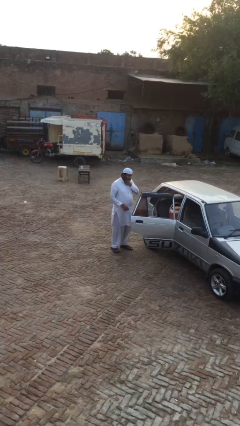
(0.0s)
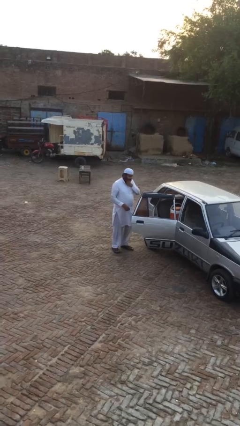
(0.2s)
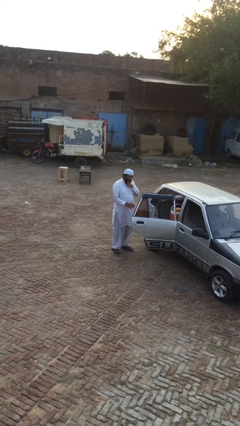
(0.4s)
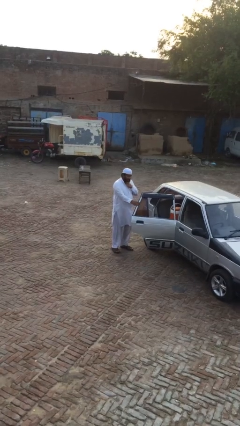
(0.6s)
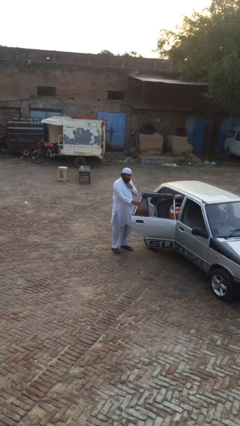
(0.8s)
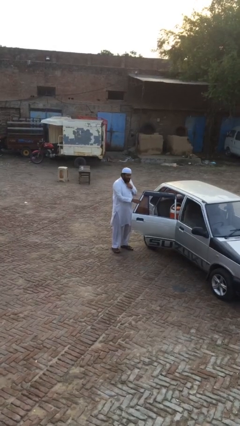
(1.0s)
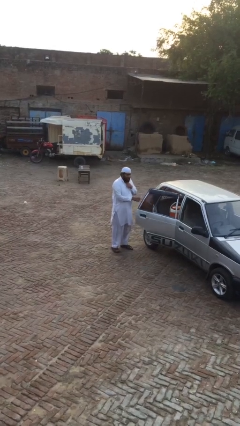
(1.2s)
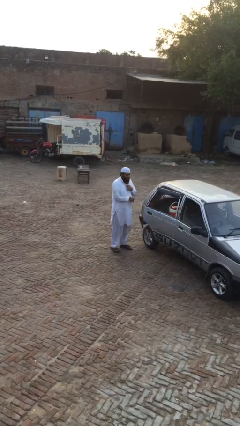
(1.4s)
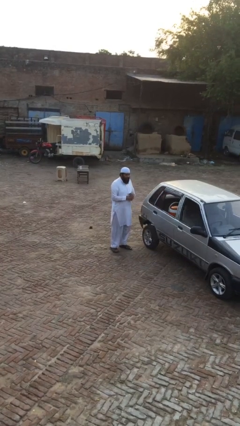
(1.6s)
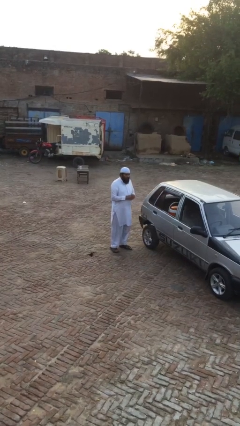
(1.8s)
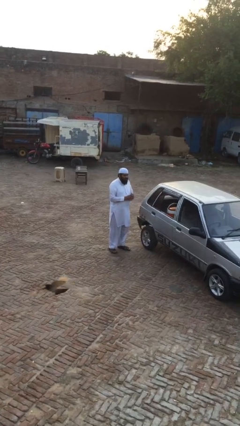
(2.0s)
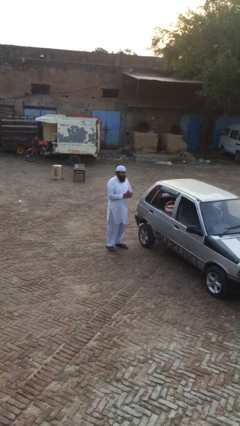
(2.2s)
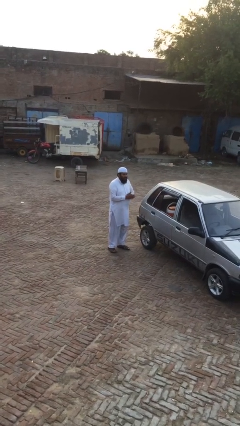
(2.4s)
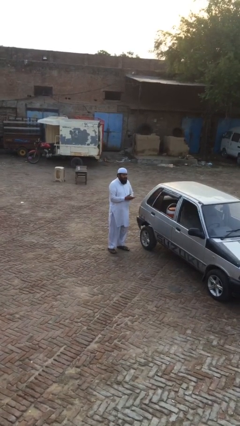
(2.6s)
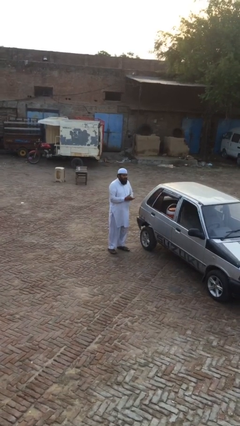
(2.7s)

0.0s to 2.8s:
person closes car door

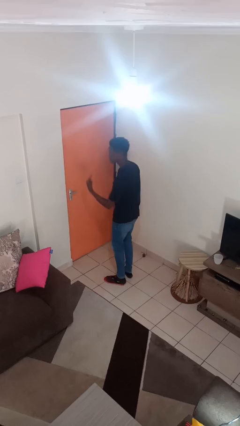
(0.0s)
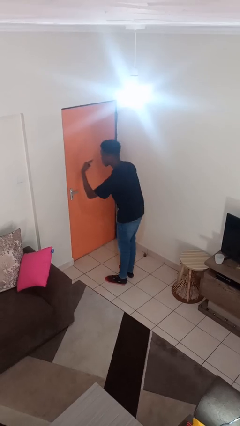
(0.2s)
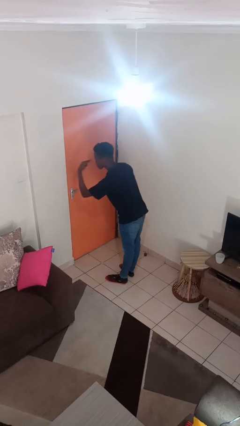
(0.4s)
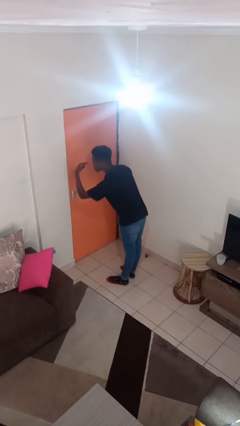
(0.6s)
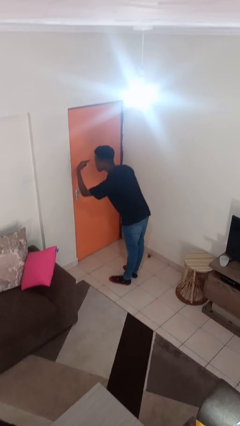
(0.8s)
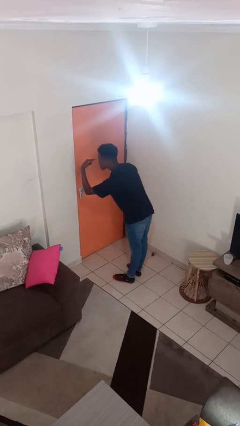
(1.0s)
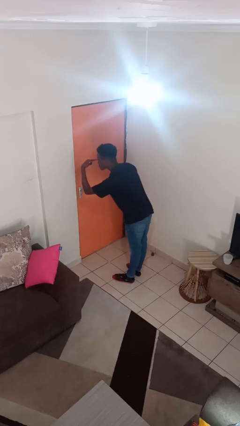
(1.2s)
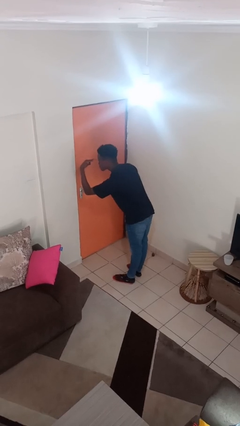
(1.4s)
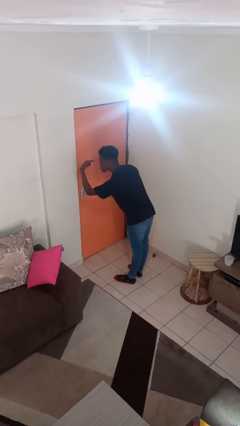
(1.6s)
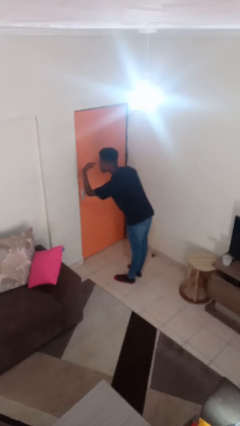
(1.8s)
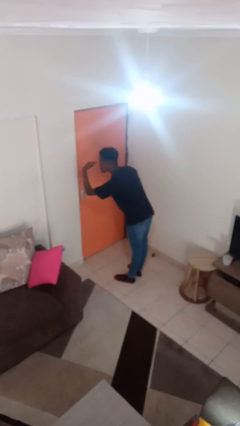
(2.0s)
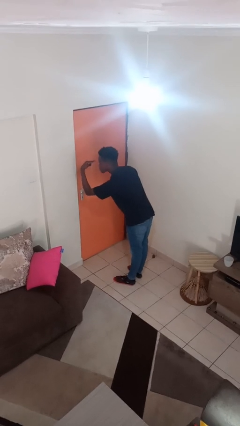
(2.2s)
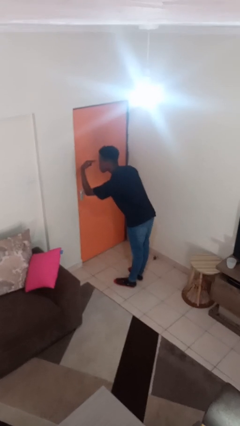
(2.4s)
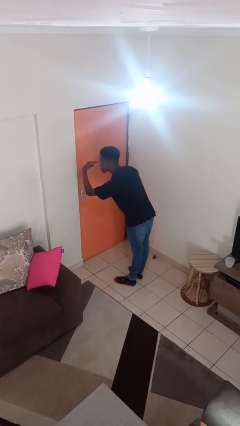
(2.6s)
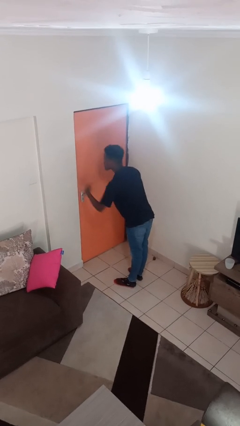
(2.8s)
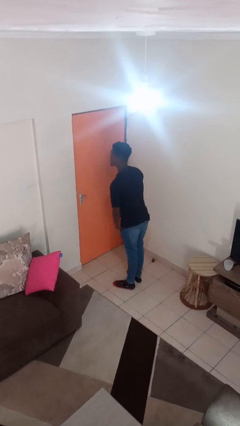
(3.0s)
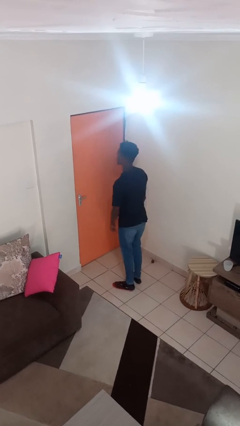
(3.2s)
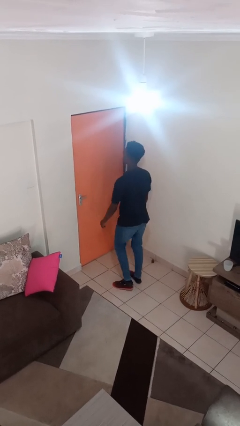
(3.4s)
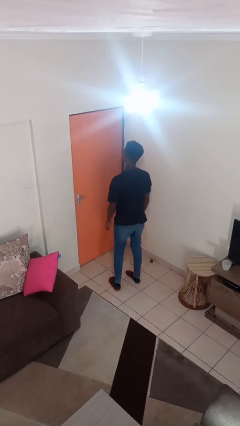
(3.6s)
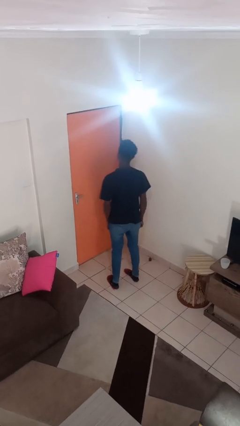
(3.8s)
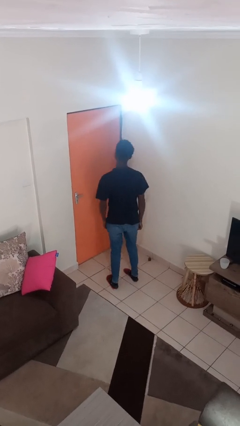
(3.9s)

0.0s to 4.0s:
person gestures watch closely

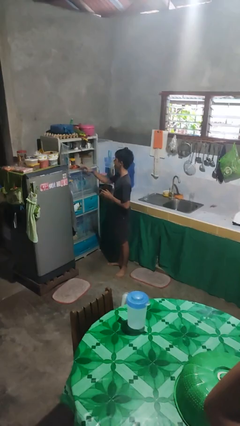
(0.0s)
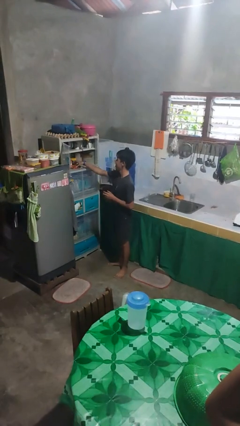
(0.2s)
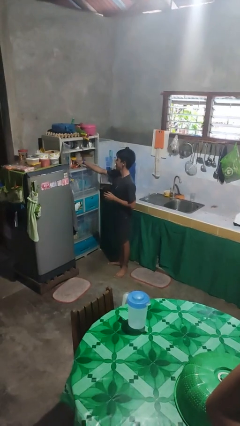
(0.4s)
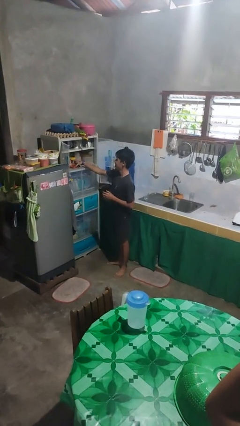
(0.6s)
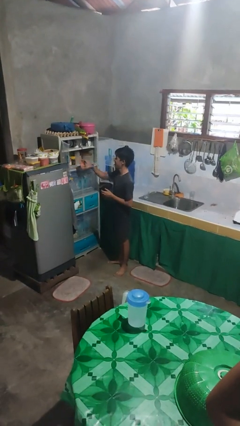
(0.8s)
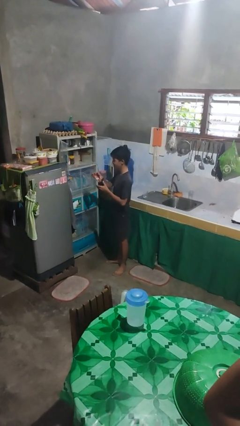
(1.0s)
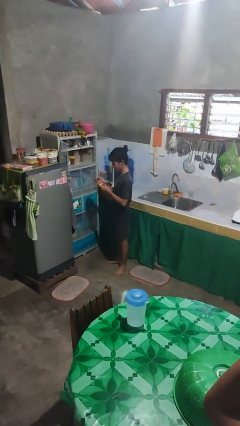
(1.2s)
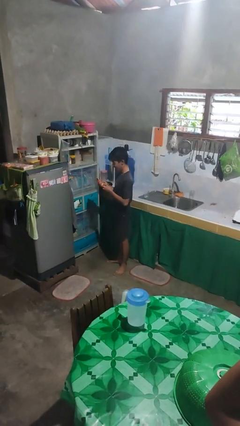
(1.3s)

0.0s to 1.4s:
person takes object from cabinet

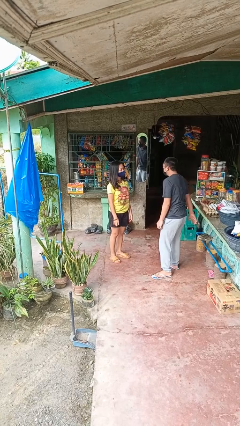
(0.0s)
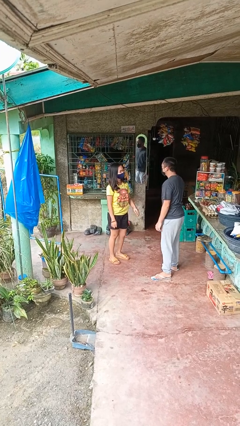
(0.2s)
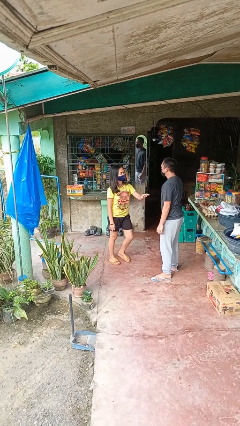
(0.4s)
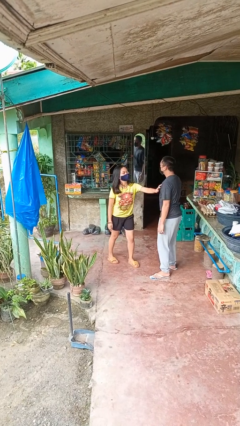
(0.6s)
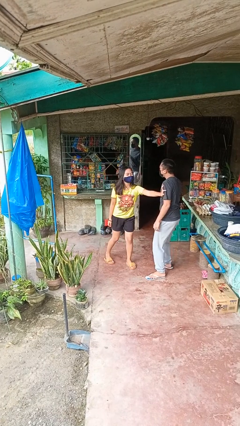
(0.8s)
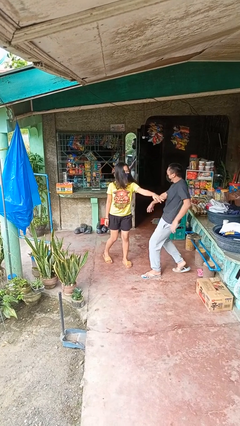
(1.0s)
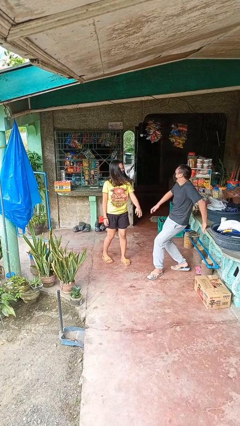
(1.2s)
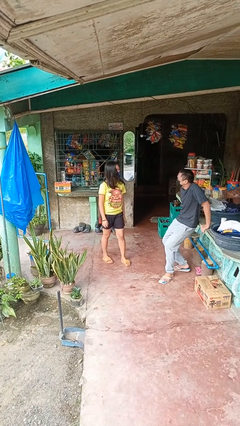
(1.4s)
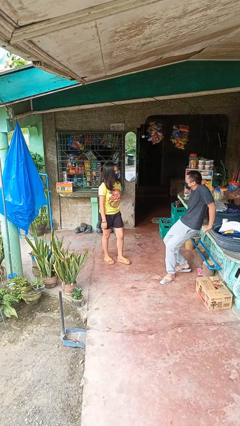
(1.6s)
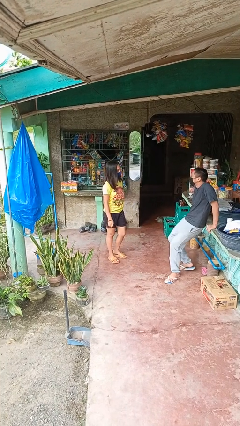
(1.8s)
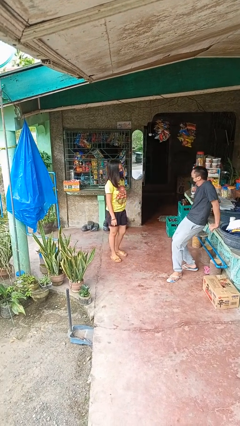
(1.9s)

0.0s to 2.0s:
person shoves person

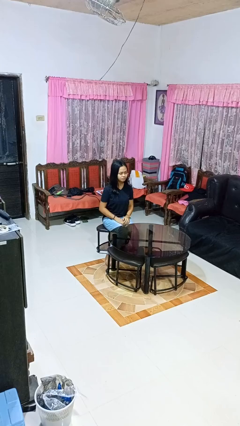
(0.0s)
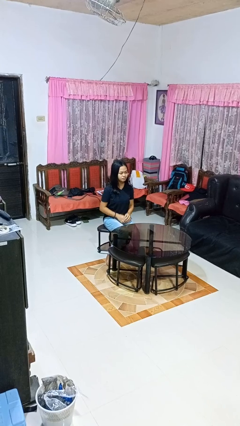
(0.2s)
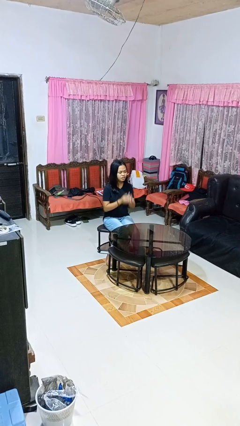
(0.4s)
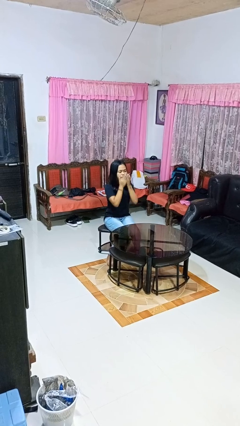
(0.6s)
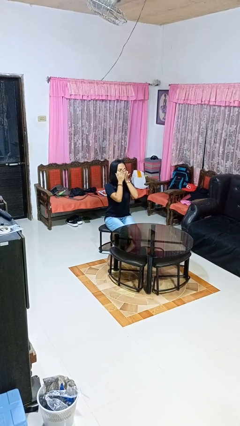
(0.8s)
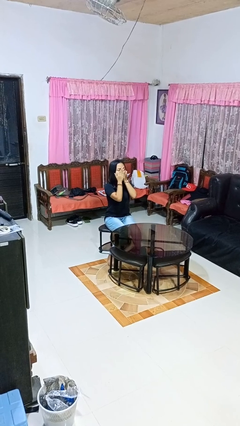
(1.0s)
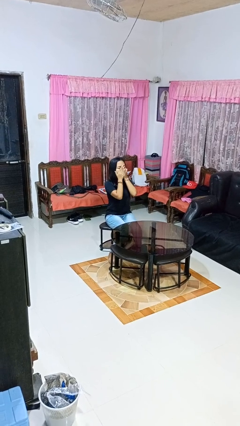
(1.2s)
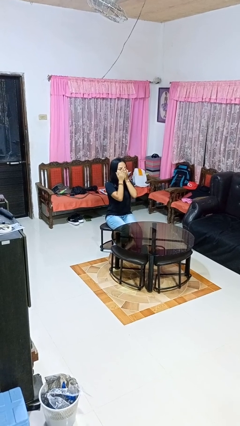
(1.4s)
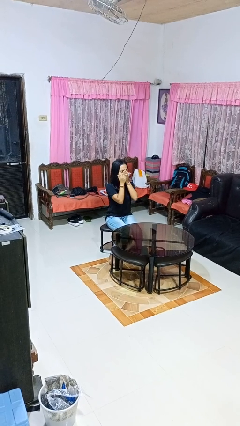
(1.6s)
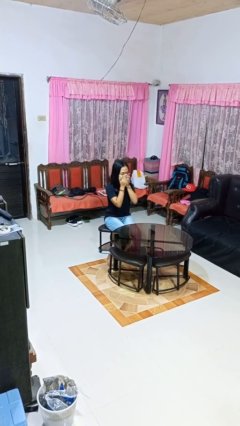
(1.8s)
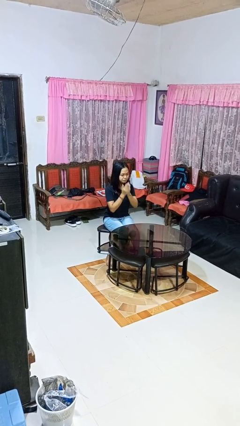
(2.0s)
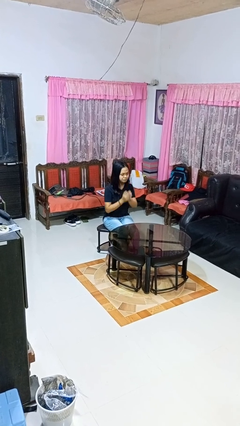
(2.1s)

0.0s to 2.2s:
person yawns

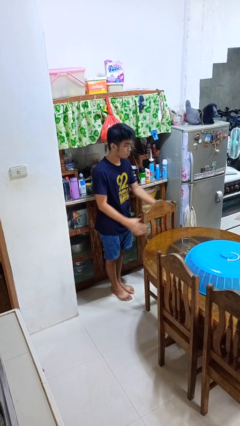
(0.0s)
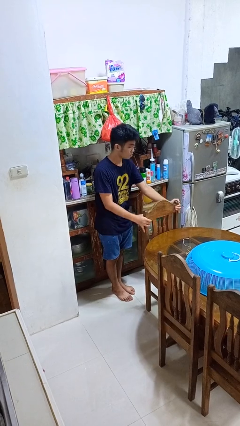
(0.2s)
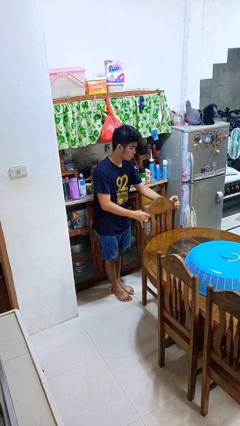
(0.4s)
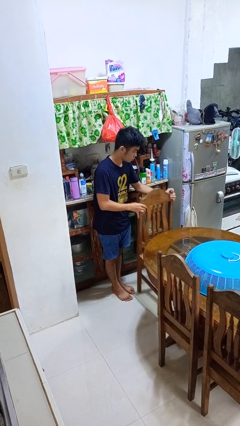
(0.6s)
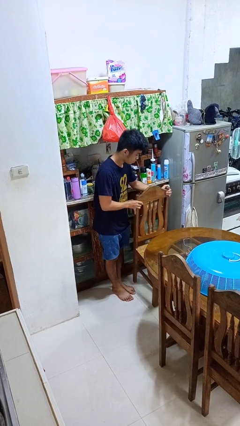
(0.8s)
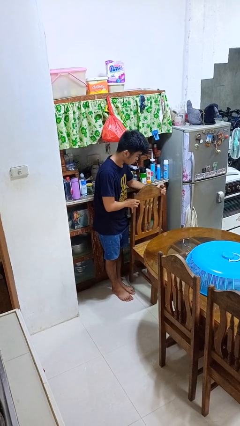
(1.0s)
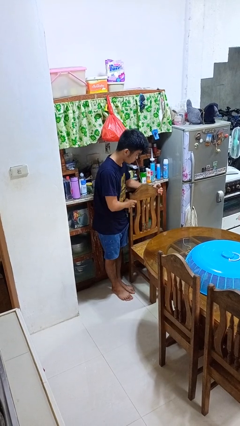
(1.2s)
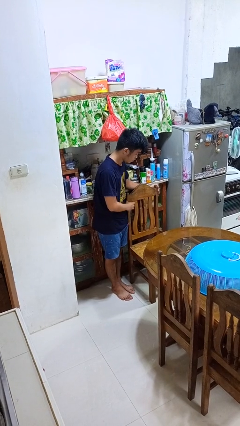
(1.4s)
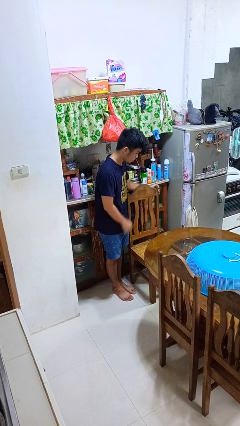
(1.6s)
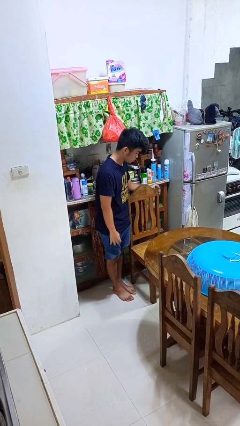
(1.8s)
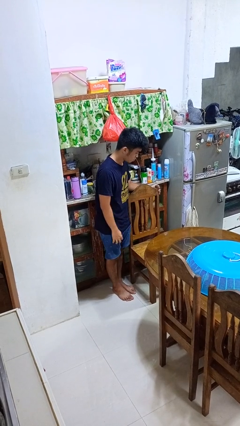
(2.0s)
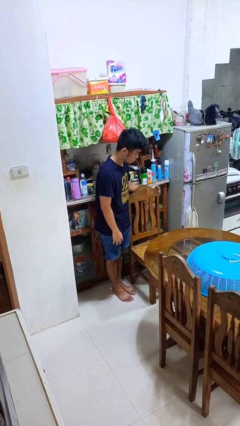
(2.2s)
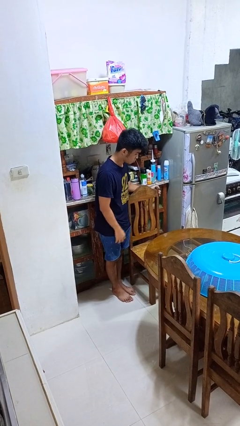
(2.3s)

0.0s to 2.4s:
person pulls out chair

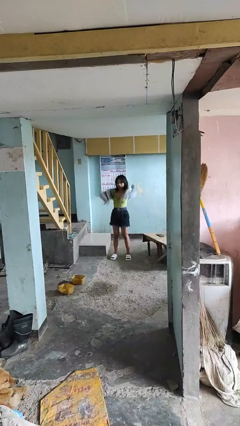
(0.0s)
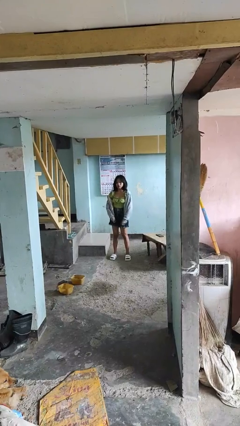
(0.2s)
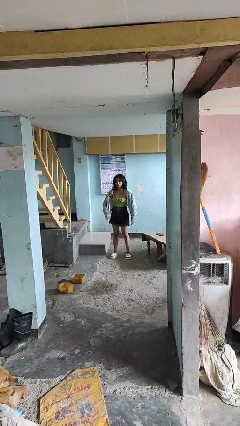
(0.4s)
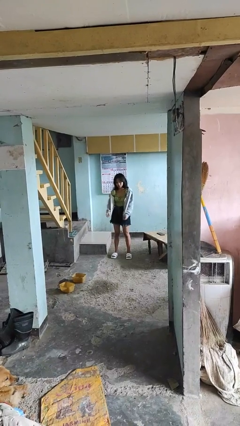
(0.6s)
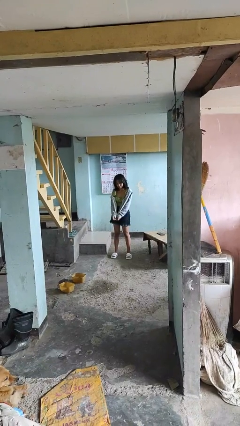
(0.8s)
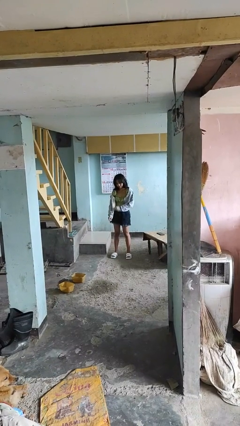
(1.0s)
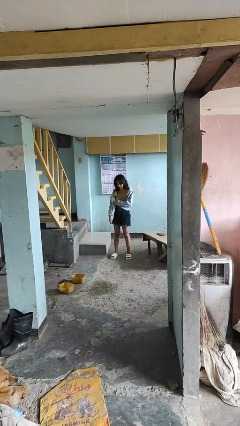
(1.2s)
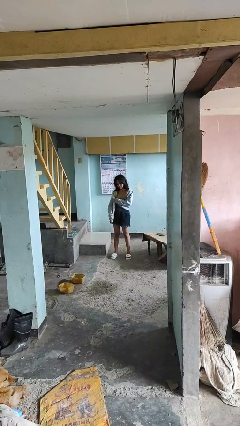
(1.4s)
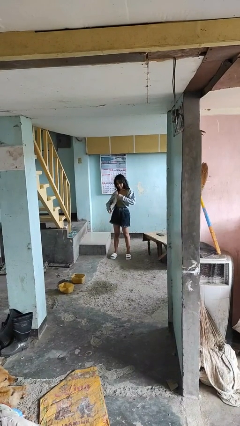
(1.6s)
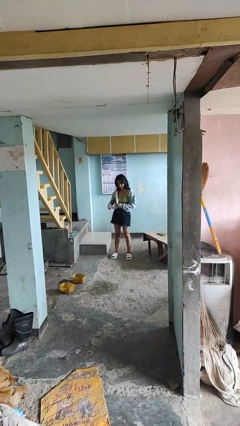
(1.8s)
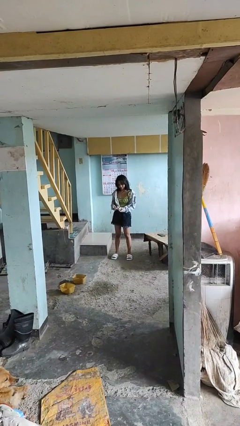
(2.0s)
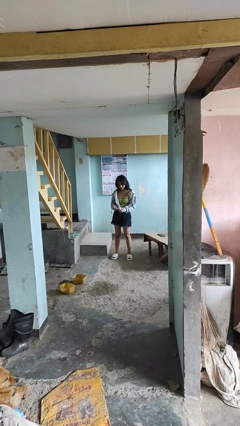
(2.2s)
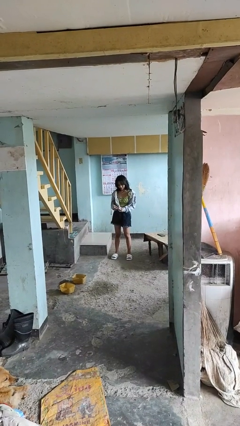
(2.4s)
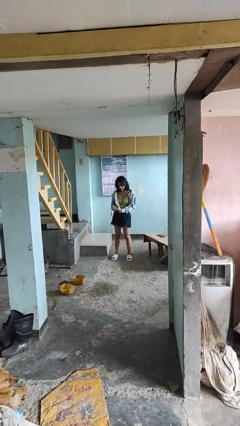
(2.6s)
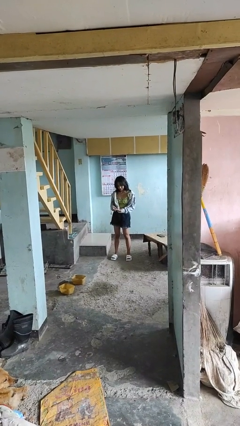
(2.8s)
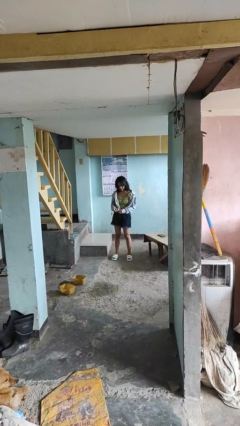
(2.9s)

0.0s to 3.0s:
person puts on jacket
